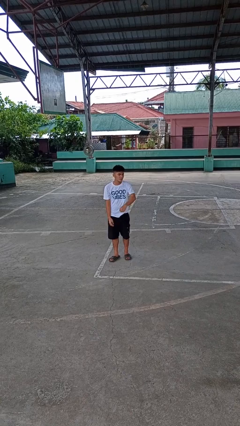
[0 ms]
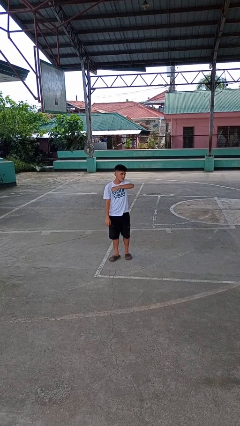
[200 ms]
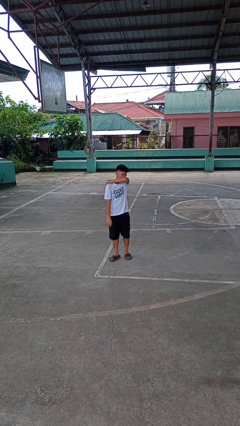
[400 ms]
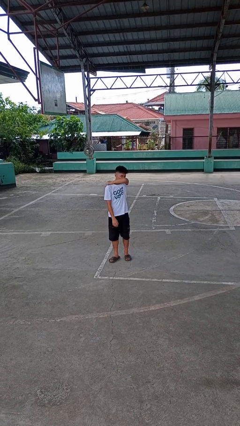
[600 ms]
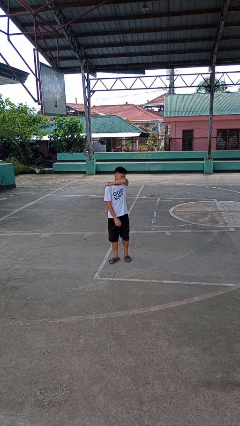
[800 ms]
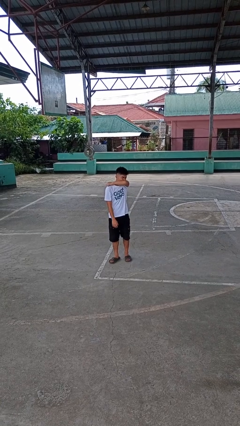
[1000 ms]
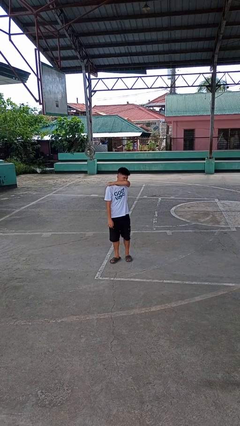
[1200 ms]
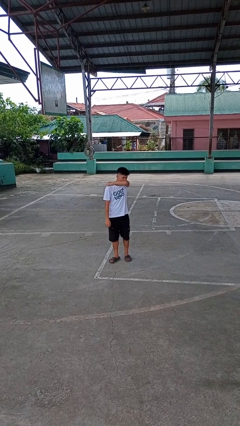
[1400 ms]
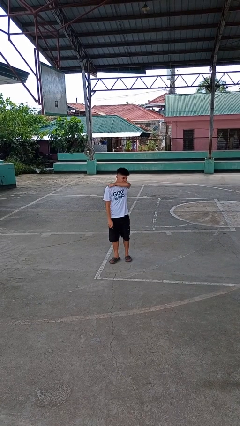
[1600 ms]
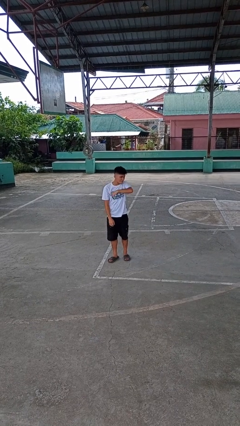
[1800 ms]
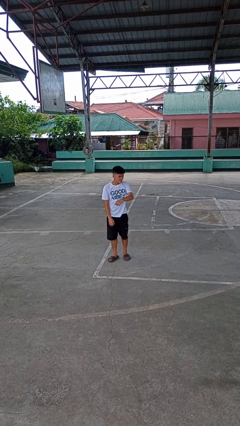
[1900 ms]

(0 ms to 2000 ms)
person sneezes into arm

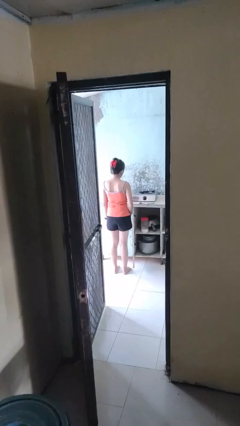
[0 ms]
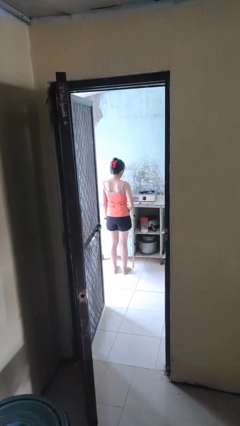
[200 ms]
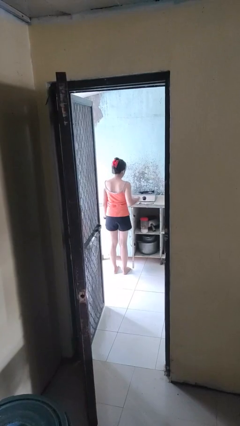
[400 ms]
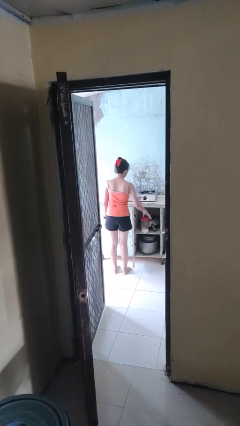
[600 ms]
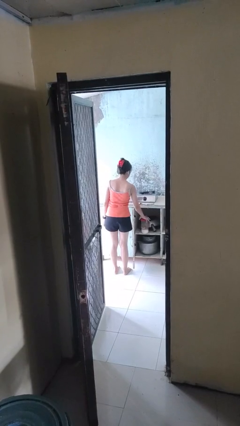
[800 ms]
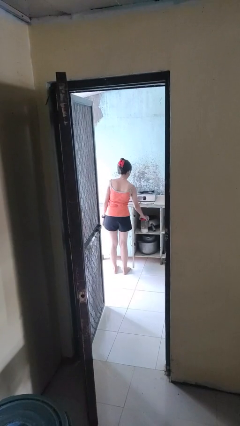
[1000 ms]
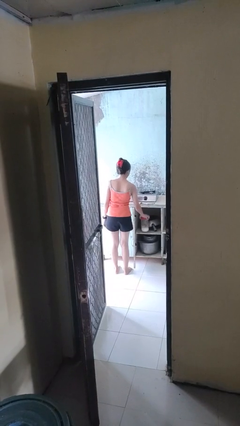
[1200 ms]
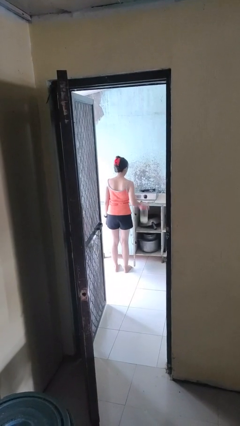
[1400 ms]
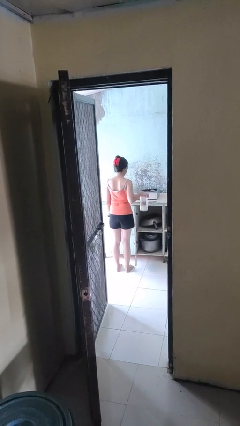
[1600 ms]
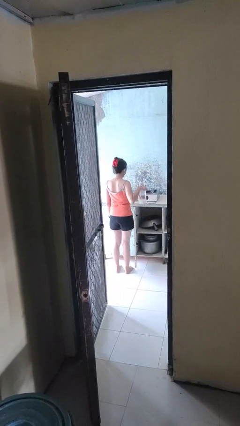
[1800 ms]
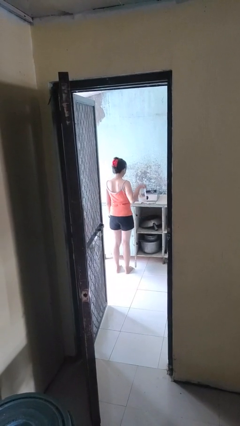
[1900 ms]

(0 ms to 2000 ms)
person picks up object from cabinet

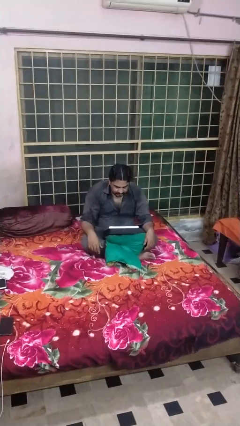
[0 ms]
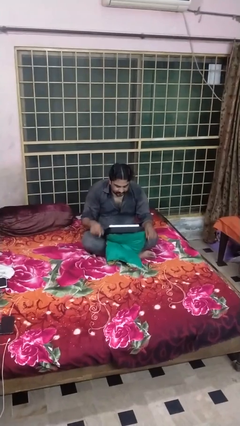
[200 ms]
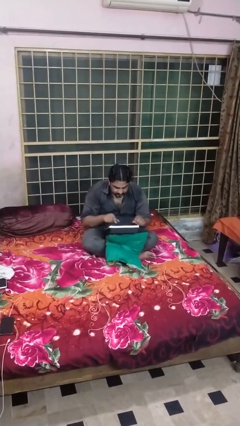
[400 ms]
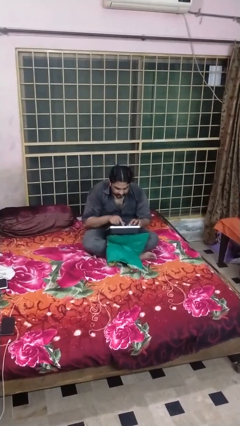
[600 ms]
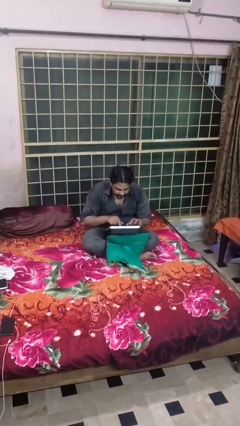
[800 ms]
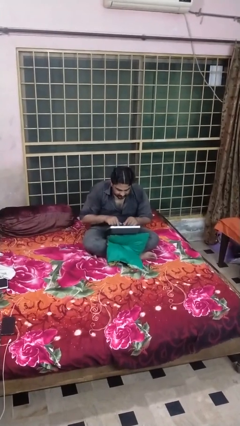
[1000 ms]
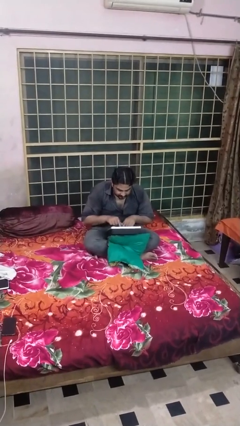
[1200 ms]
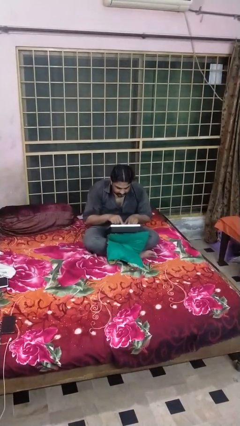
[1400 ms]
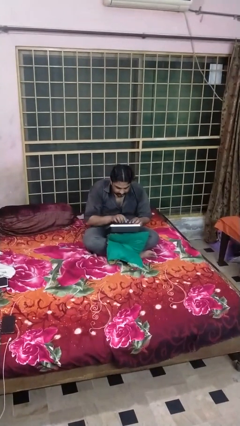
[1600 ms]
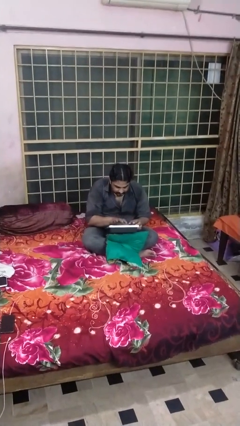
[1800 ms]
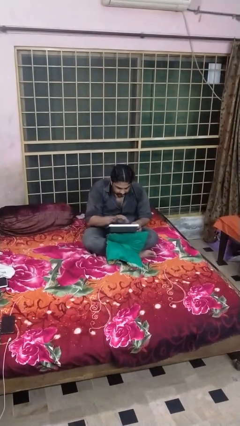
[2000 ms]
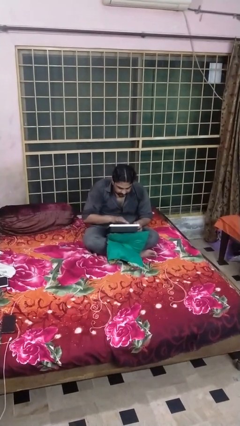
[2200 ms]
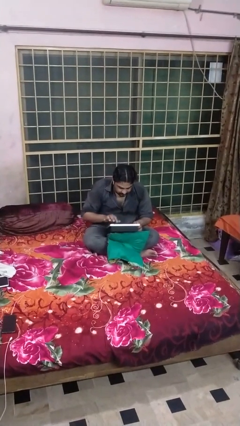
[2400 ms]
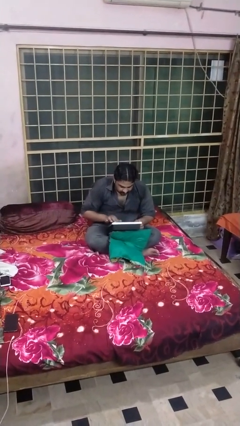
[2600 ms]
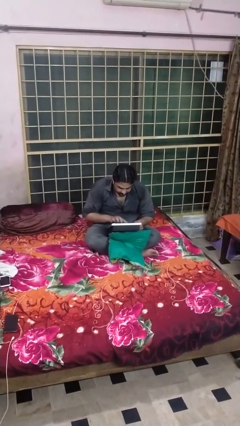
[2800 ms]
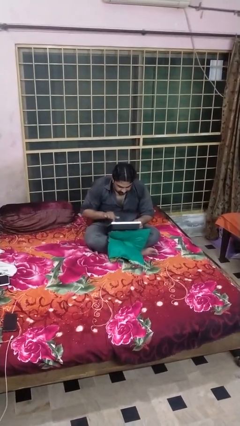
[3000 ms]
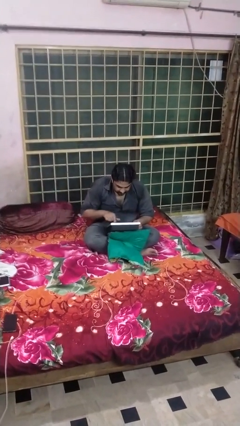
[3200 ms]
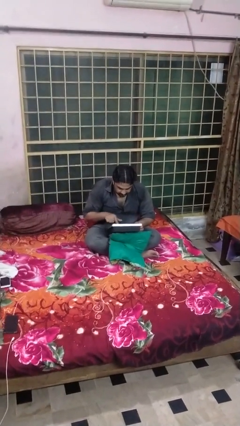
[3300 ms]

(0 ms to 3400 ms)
person interacts with tablet

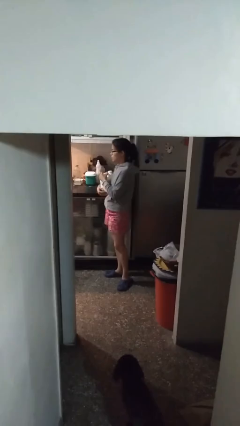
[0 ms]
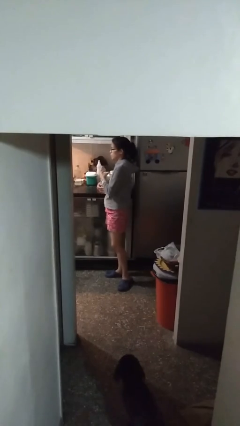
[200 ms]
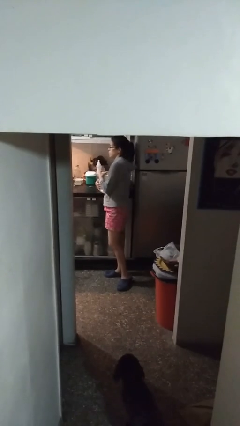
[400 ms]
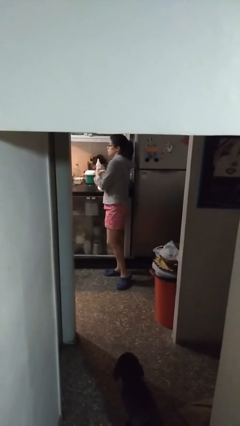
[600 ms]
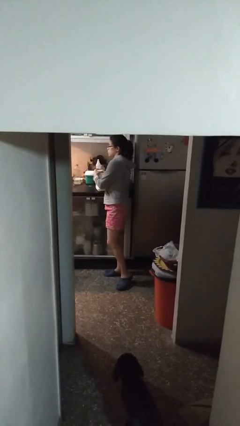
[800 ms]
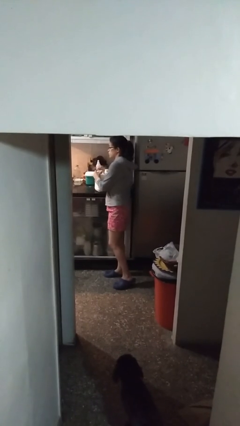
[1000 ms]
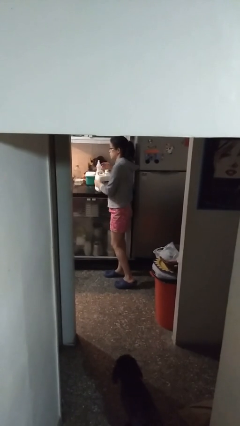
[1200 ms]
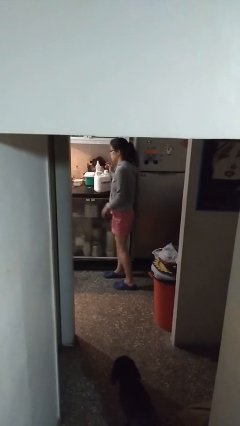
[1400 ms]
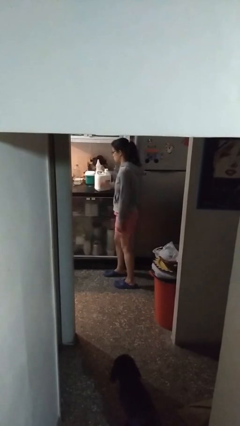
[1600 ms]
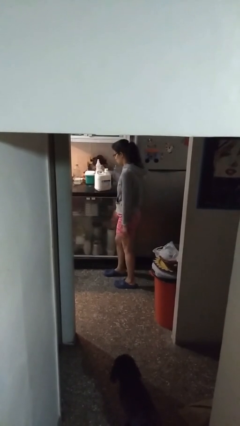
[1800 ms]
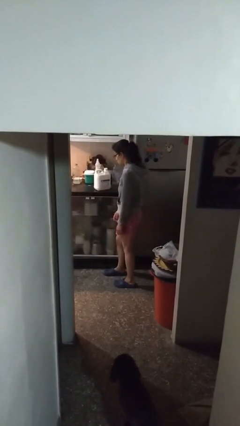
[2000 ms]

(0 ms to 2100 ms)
person puts down object on countertop

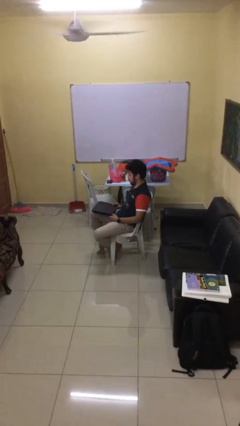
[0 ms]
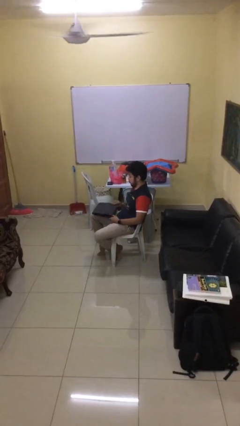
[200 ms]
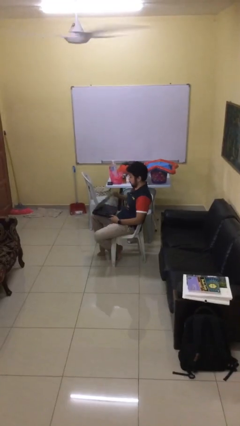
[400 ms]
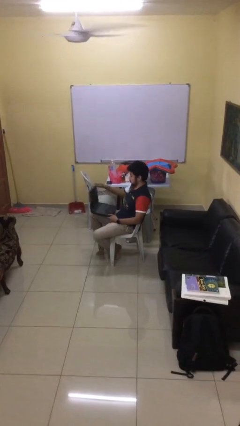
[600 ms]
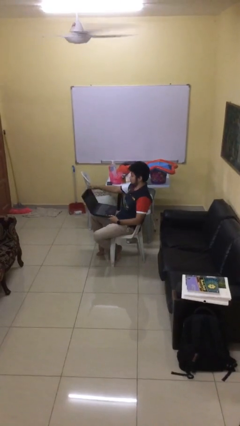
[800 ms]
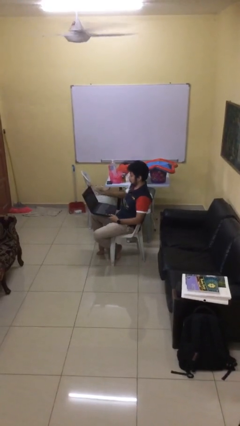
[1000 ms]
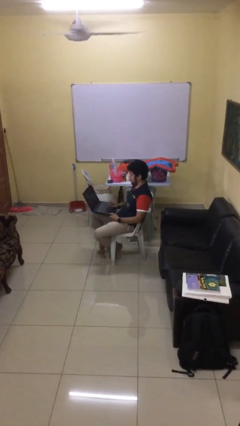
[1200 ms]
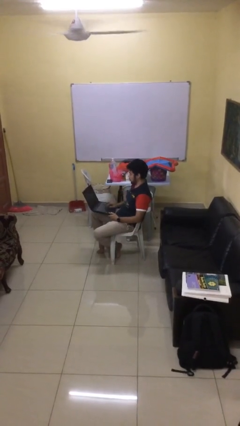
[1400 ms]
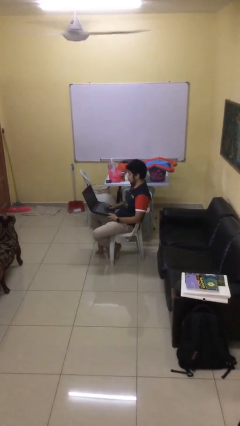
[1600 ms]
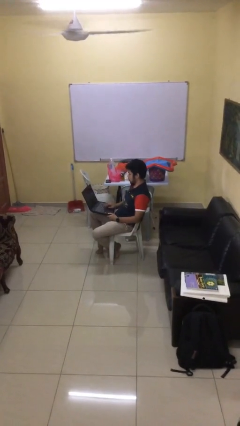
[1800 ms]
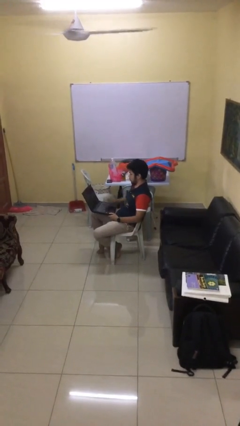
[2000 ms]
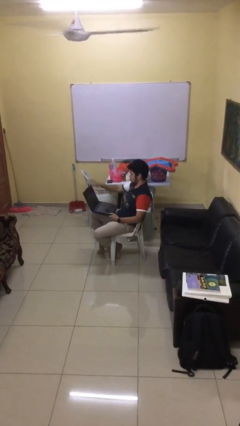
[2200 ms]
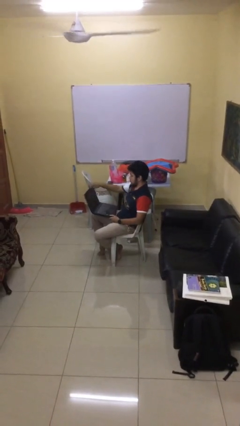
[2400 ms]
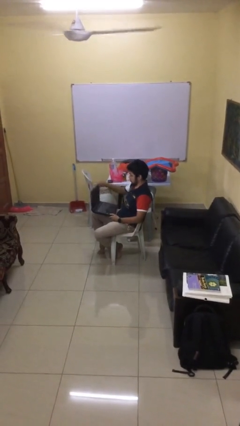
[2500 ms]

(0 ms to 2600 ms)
person opens laptop

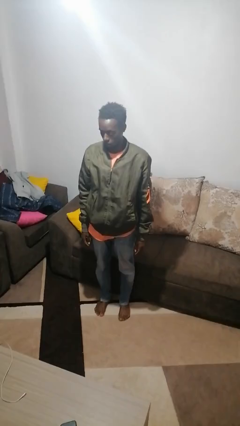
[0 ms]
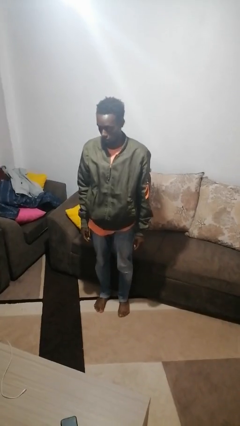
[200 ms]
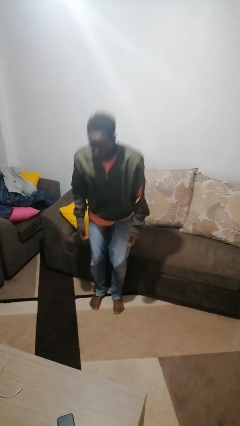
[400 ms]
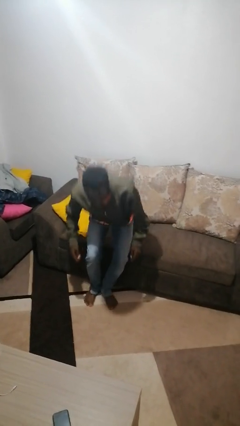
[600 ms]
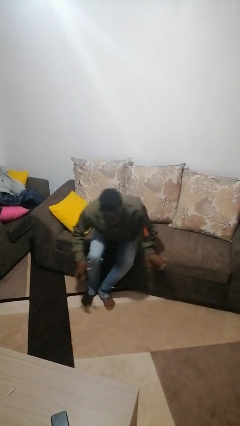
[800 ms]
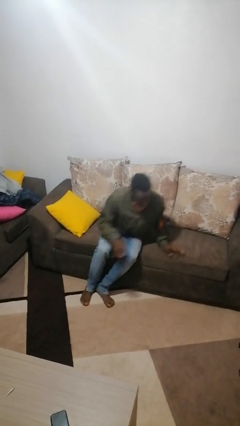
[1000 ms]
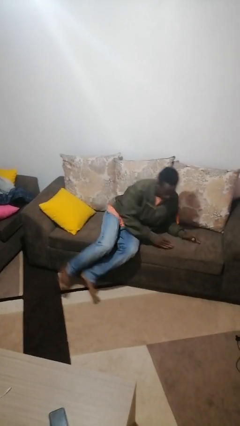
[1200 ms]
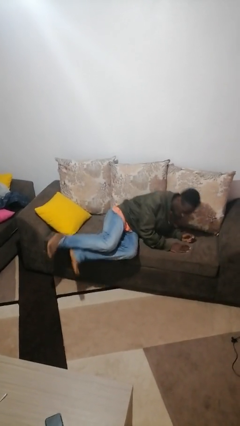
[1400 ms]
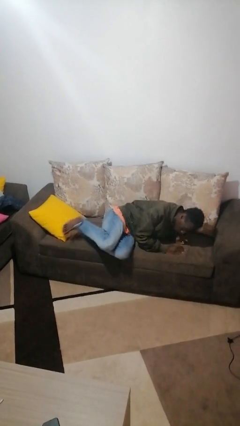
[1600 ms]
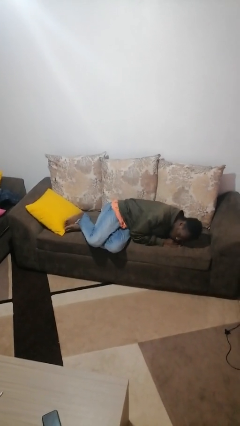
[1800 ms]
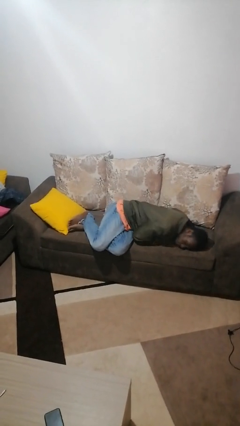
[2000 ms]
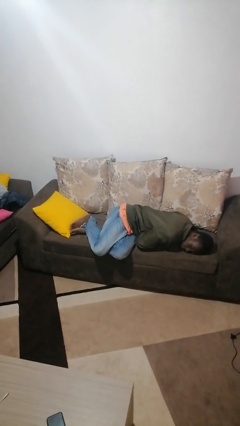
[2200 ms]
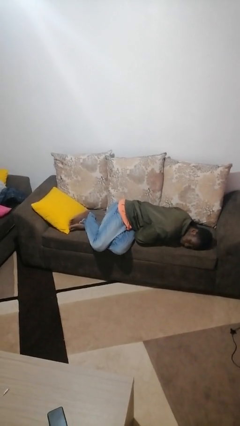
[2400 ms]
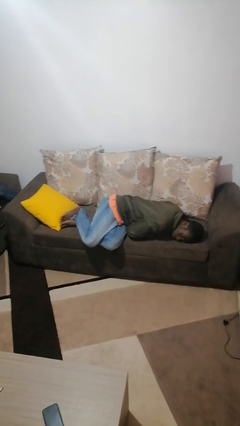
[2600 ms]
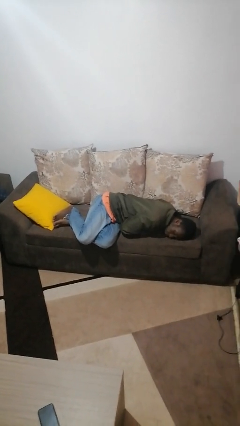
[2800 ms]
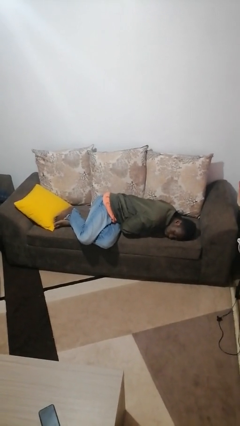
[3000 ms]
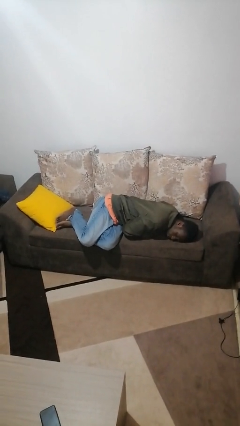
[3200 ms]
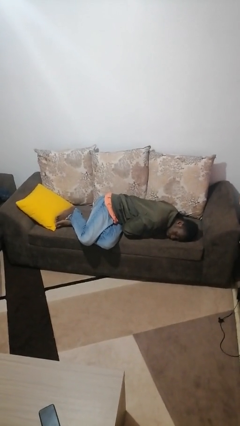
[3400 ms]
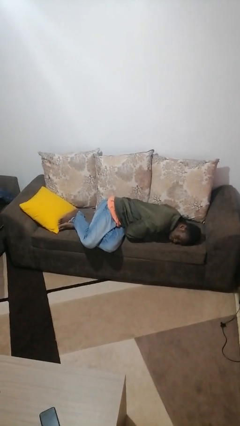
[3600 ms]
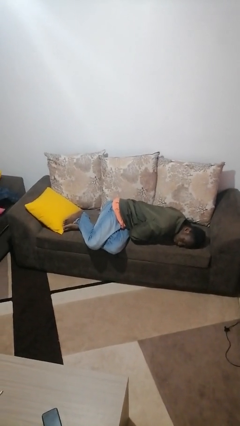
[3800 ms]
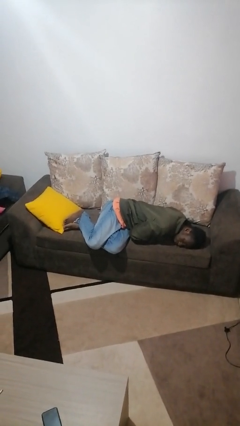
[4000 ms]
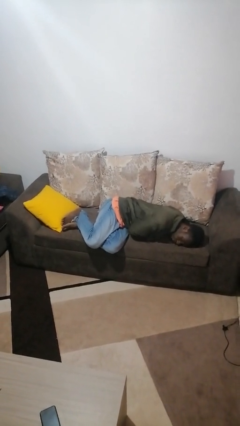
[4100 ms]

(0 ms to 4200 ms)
person lies down on couch

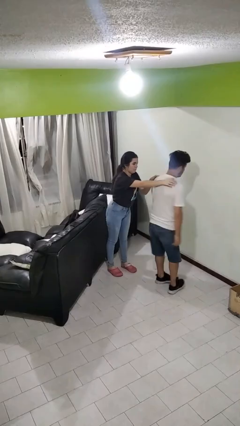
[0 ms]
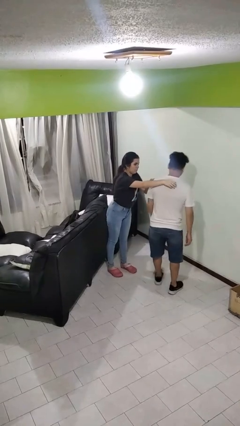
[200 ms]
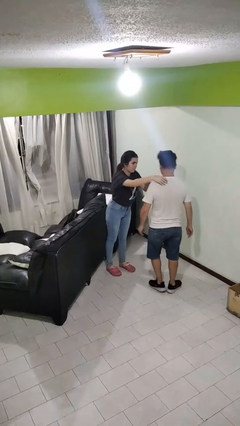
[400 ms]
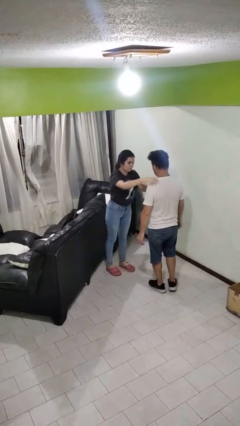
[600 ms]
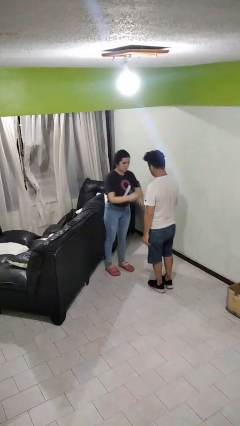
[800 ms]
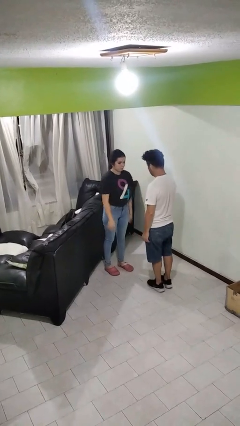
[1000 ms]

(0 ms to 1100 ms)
person spins person around
